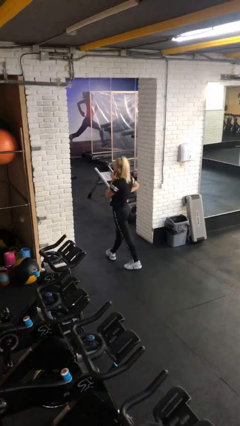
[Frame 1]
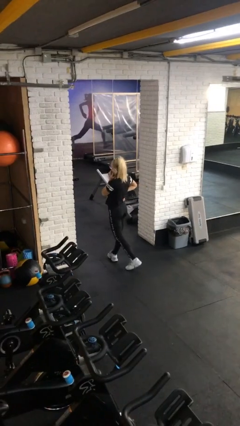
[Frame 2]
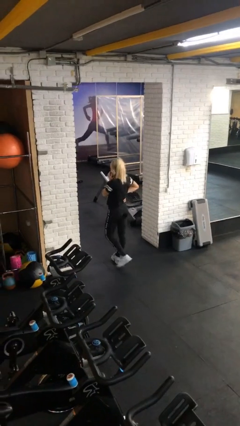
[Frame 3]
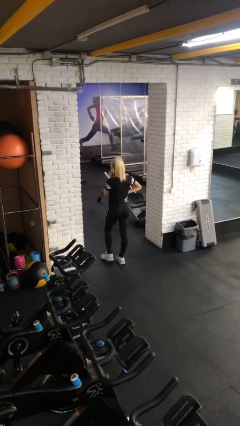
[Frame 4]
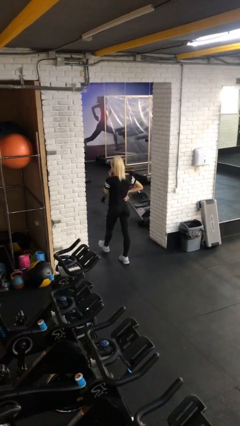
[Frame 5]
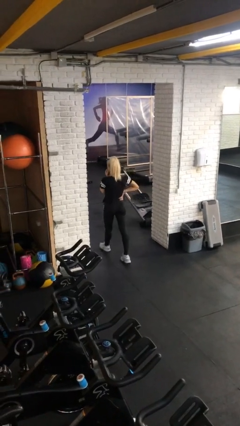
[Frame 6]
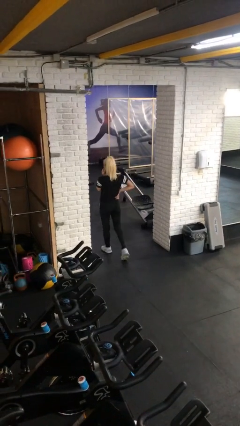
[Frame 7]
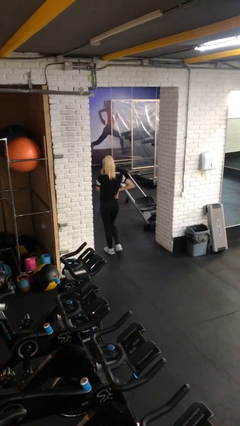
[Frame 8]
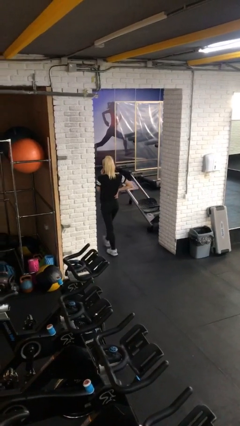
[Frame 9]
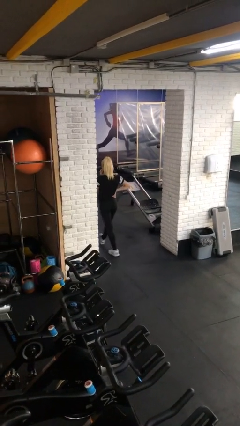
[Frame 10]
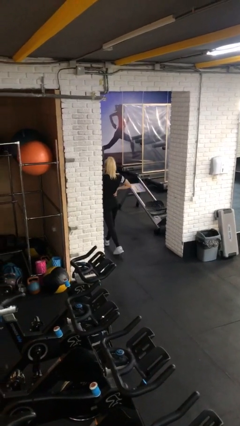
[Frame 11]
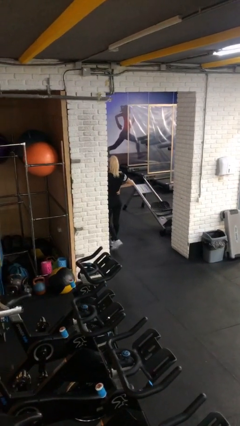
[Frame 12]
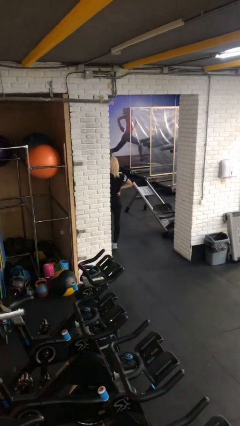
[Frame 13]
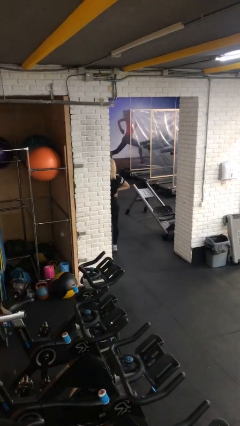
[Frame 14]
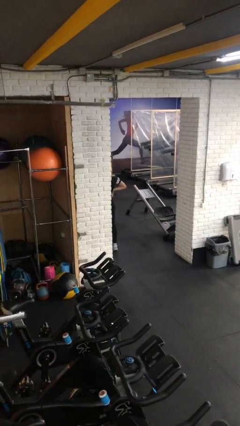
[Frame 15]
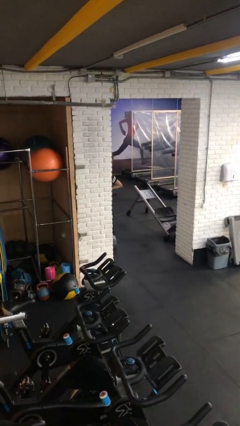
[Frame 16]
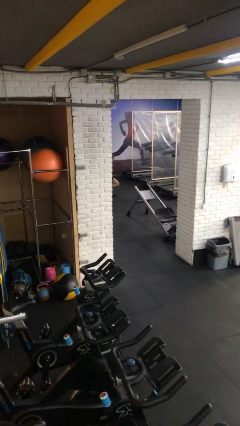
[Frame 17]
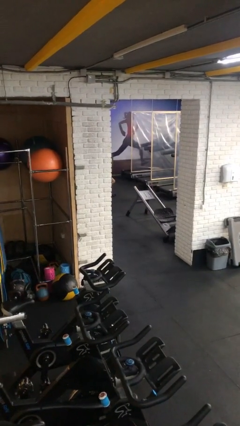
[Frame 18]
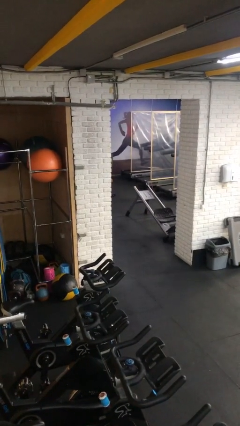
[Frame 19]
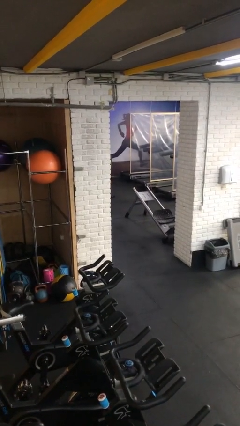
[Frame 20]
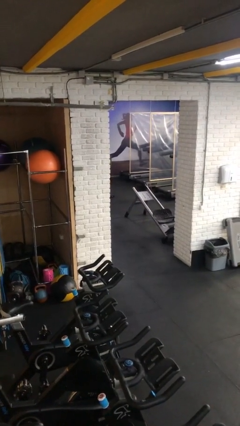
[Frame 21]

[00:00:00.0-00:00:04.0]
person exits scene through structure

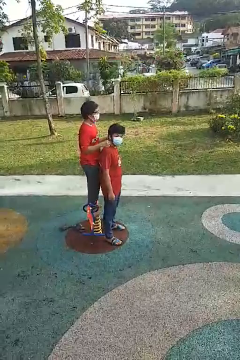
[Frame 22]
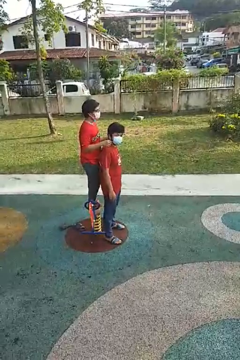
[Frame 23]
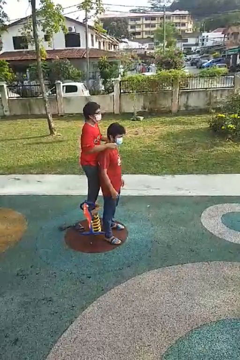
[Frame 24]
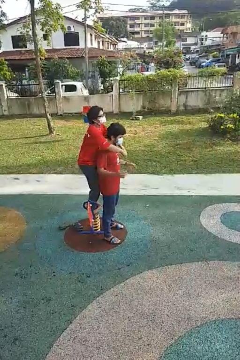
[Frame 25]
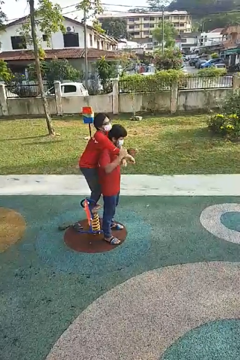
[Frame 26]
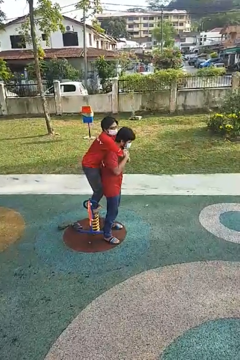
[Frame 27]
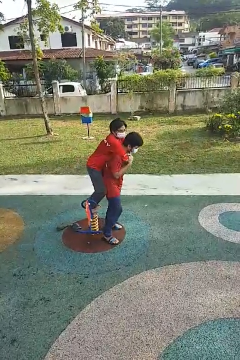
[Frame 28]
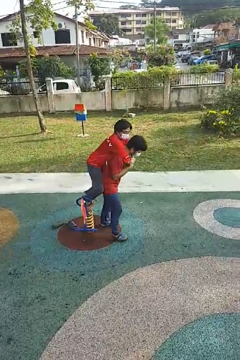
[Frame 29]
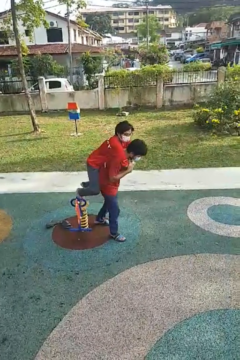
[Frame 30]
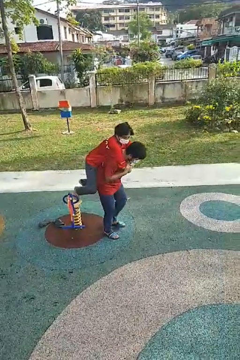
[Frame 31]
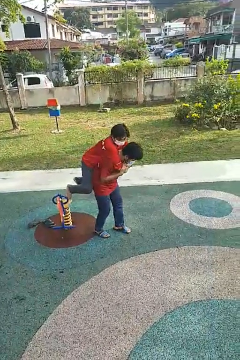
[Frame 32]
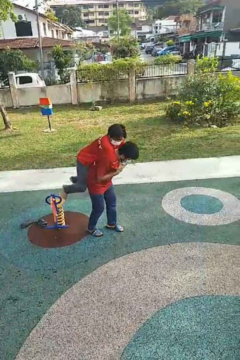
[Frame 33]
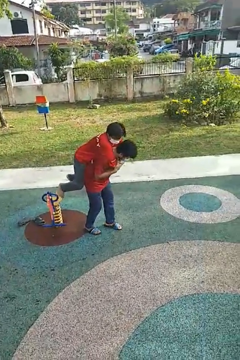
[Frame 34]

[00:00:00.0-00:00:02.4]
person carries person over shoulder

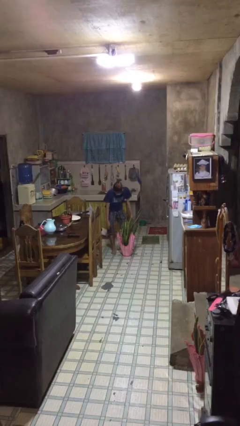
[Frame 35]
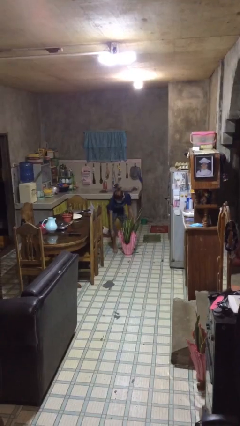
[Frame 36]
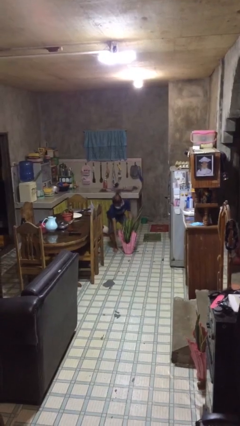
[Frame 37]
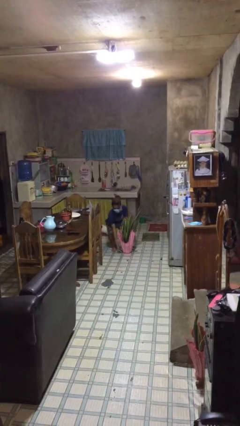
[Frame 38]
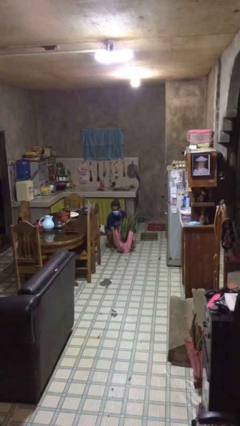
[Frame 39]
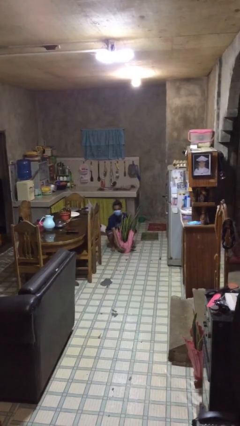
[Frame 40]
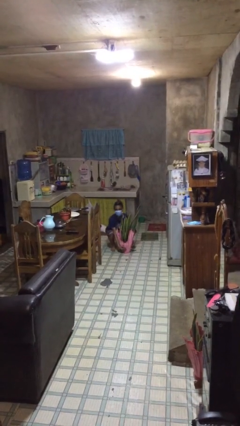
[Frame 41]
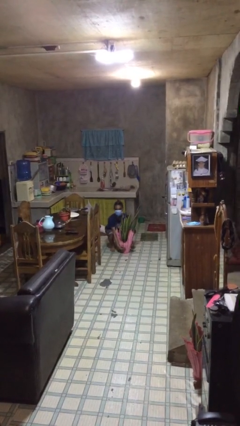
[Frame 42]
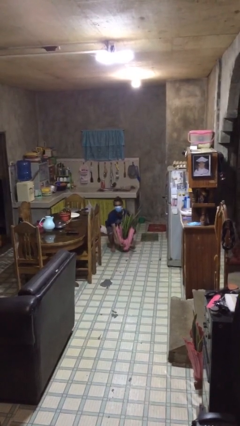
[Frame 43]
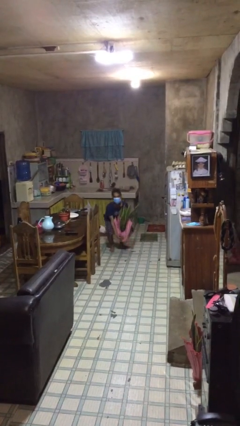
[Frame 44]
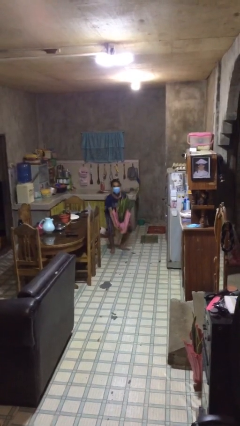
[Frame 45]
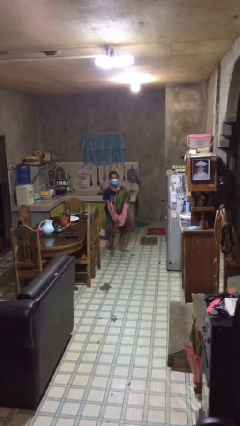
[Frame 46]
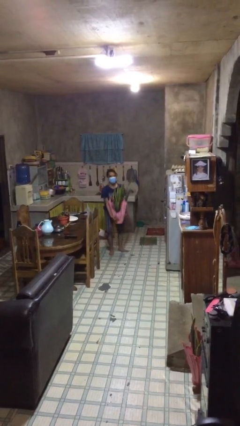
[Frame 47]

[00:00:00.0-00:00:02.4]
person picks up object from floor

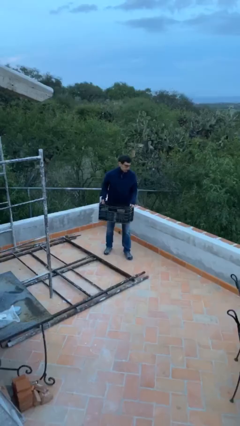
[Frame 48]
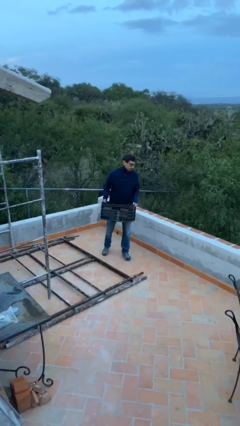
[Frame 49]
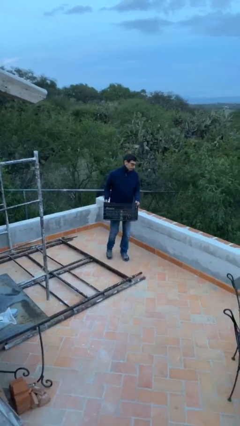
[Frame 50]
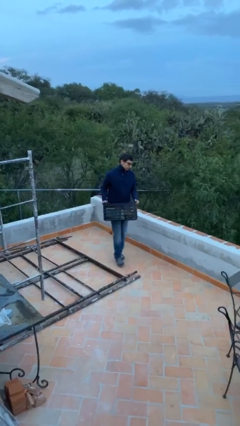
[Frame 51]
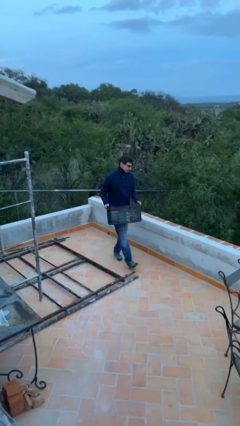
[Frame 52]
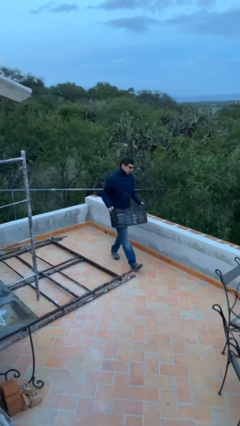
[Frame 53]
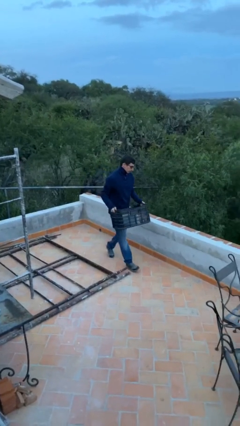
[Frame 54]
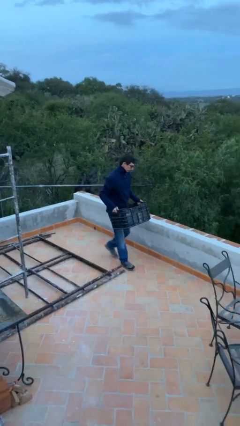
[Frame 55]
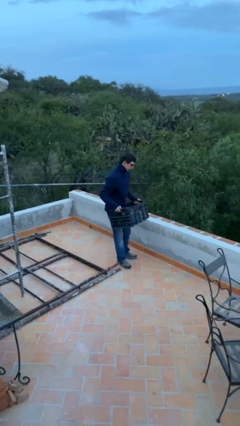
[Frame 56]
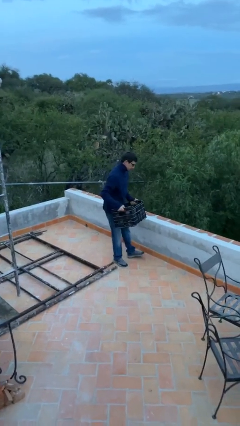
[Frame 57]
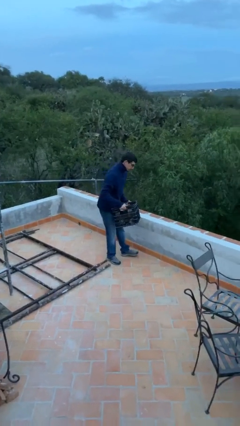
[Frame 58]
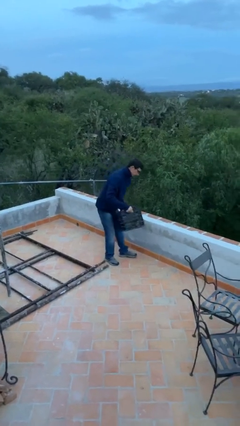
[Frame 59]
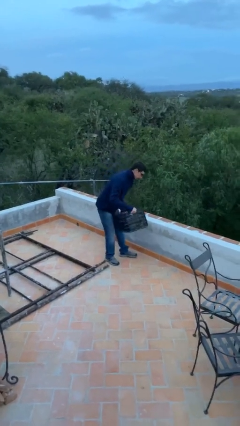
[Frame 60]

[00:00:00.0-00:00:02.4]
person carries heavy object

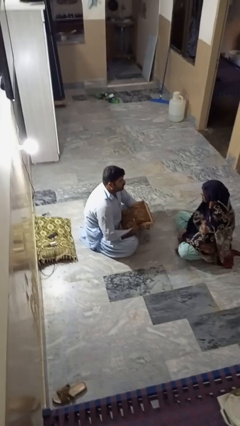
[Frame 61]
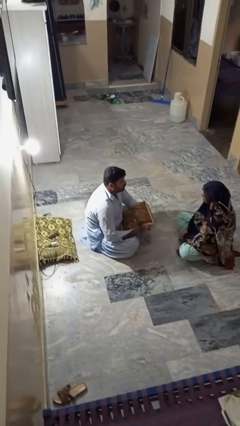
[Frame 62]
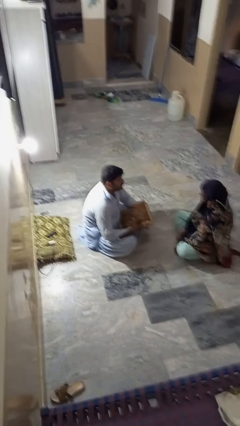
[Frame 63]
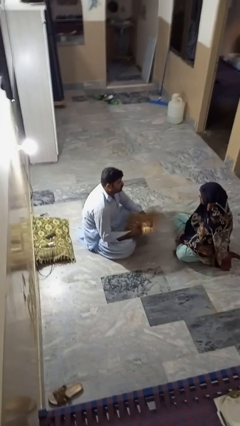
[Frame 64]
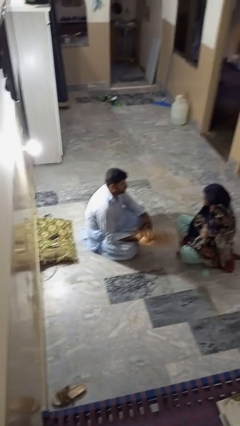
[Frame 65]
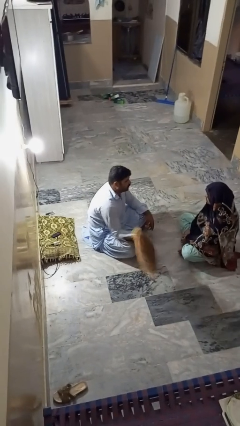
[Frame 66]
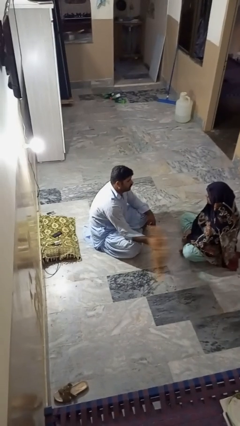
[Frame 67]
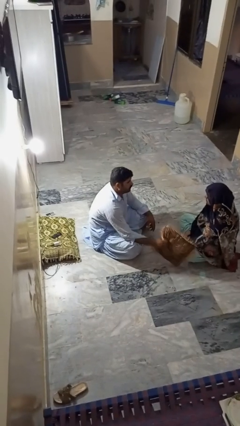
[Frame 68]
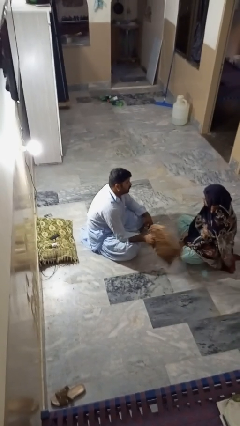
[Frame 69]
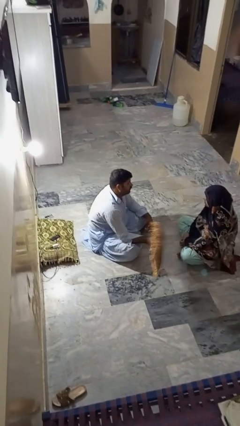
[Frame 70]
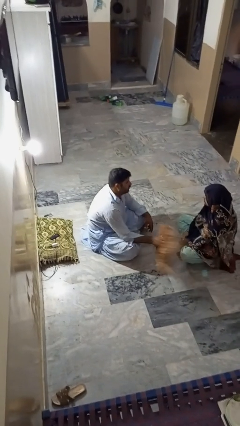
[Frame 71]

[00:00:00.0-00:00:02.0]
person hits person with pillow

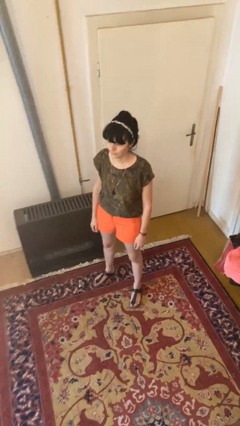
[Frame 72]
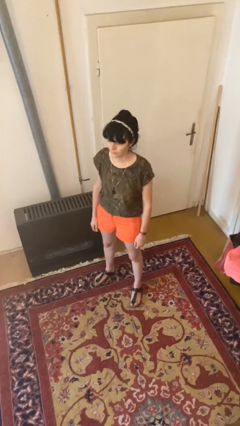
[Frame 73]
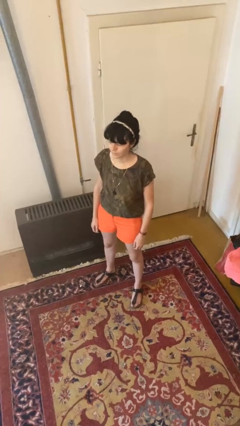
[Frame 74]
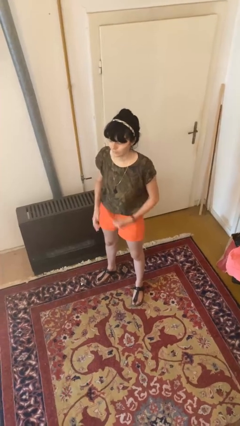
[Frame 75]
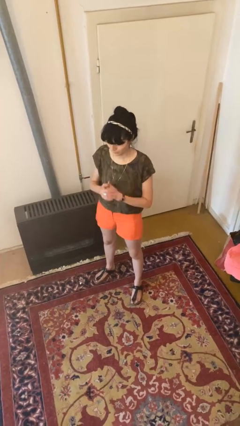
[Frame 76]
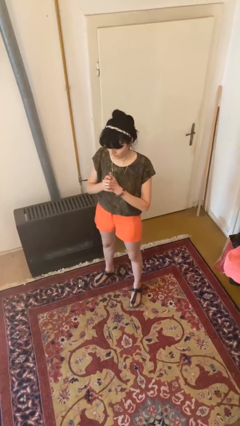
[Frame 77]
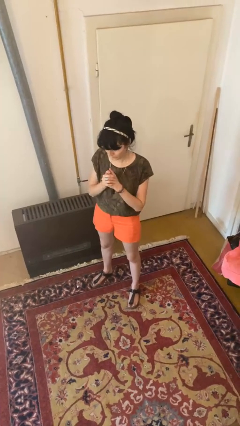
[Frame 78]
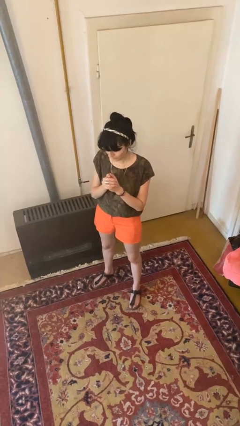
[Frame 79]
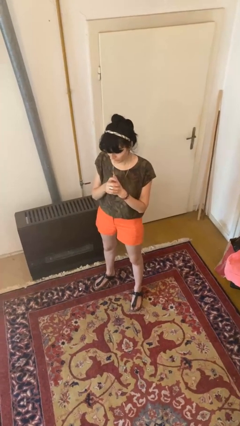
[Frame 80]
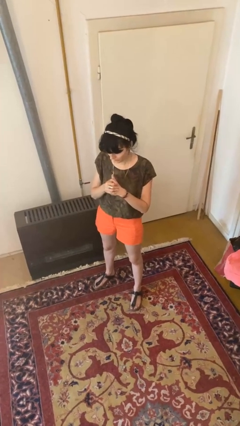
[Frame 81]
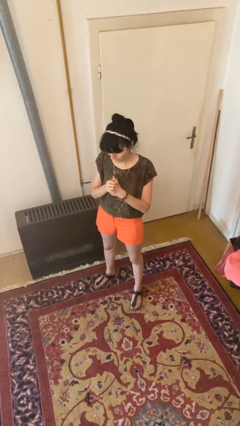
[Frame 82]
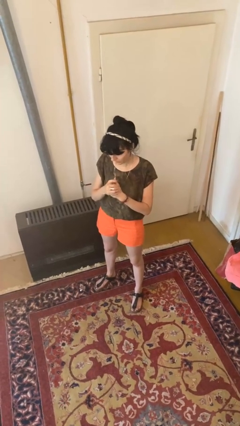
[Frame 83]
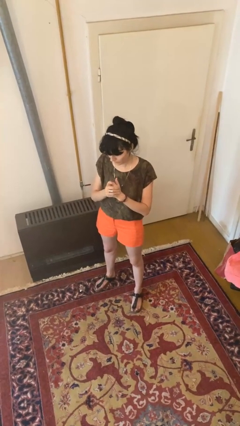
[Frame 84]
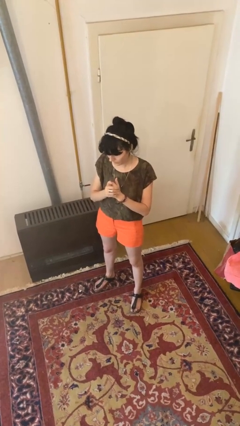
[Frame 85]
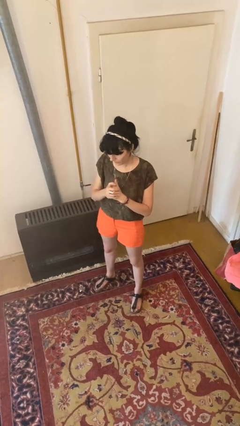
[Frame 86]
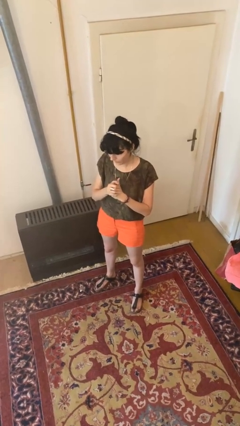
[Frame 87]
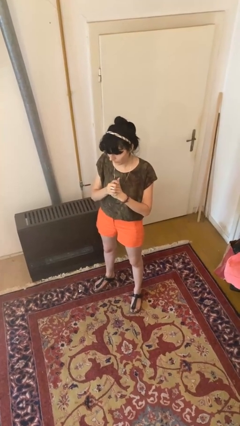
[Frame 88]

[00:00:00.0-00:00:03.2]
person cracks knuckles

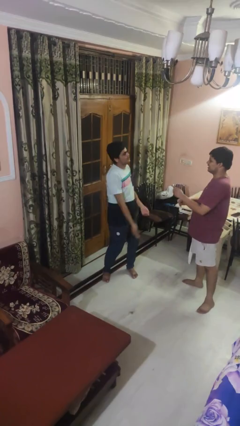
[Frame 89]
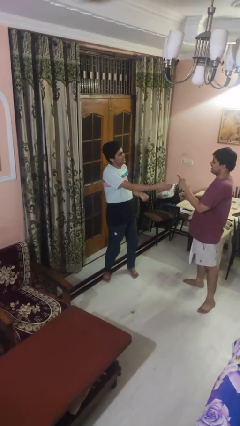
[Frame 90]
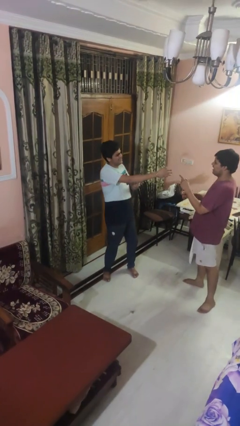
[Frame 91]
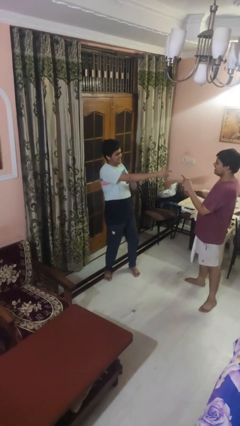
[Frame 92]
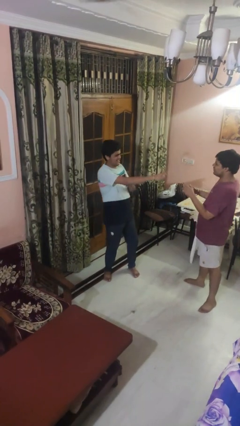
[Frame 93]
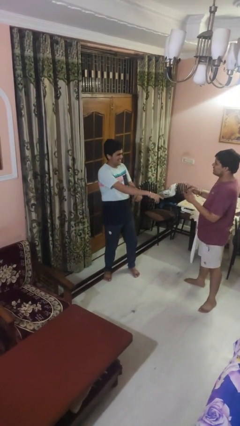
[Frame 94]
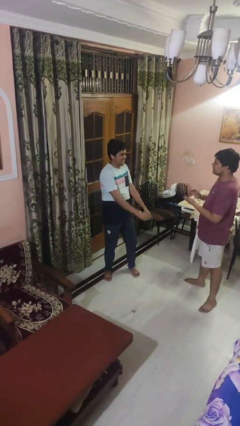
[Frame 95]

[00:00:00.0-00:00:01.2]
person laughs with person

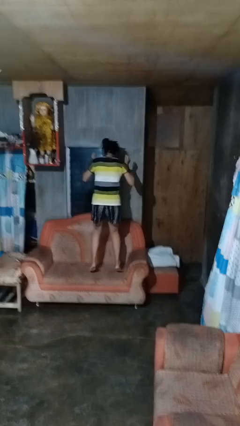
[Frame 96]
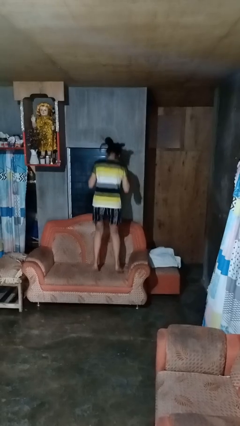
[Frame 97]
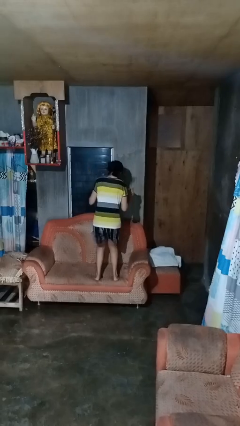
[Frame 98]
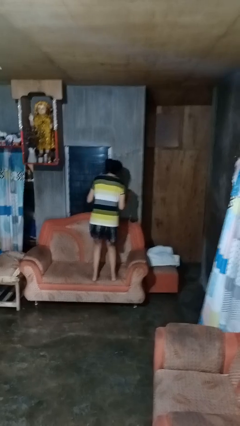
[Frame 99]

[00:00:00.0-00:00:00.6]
person jumps on couch
